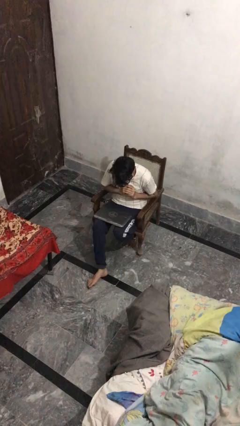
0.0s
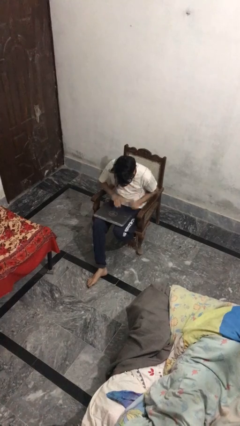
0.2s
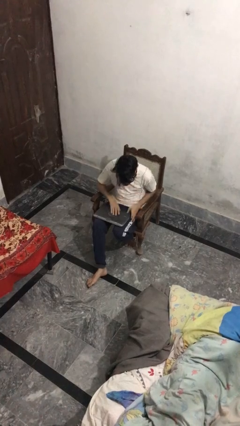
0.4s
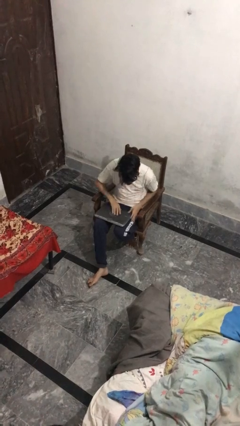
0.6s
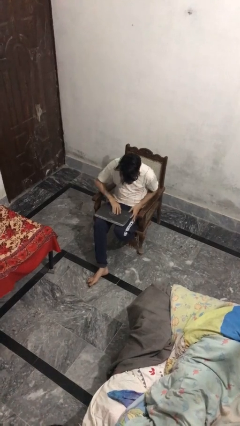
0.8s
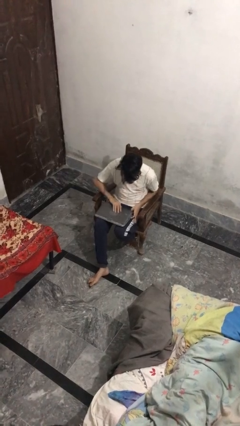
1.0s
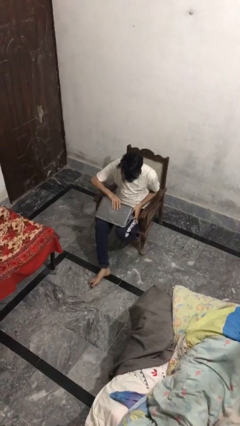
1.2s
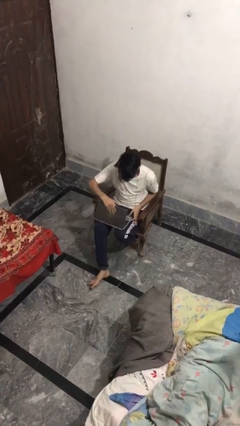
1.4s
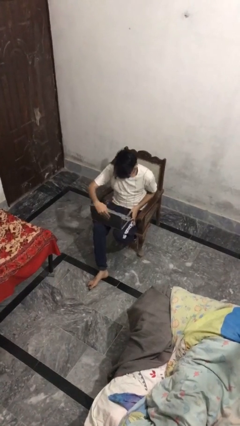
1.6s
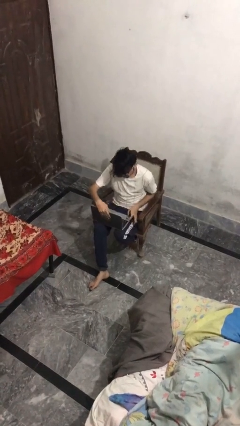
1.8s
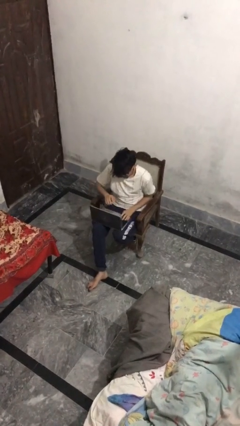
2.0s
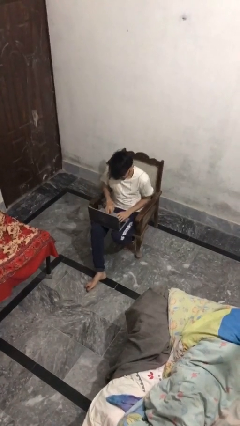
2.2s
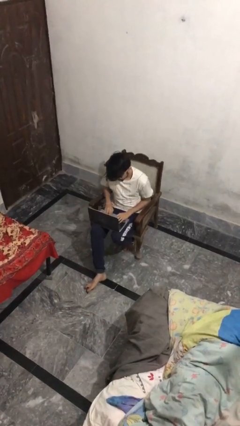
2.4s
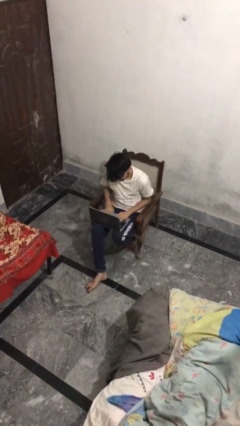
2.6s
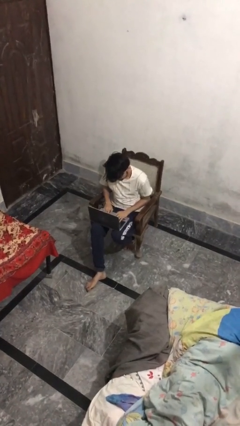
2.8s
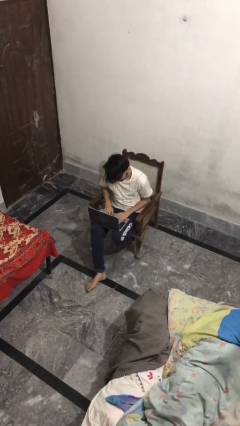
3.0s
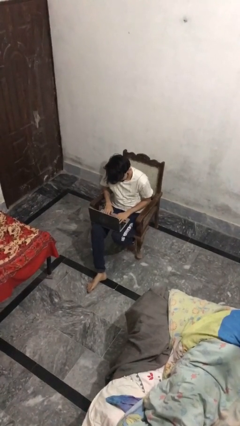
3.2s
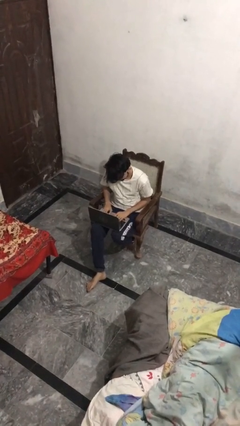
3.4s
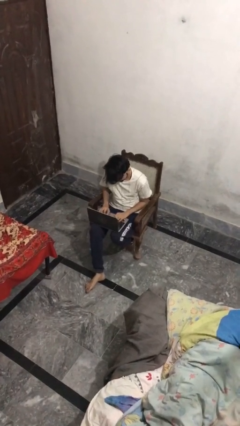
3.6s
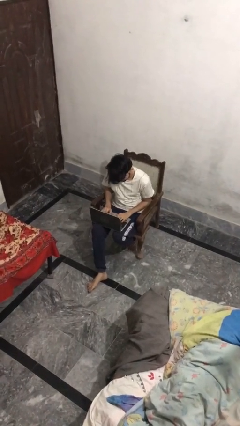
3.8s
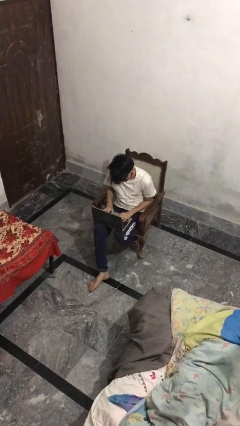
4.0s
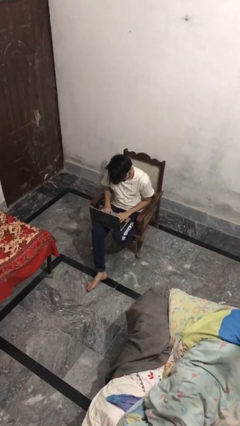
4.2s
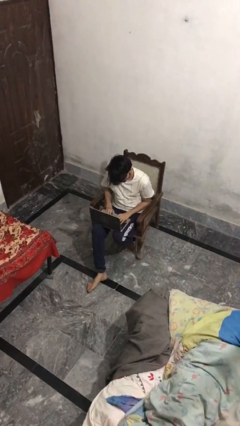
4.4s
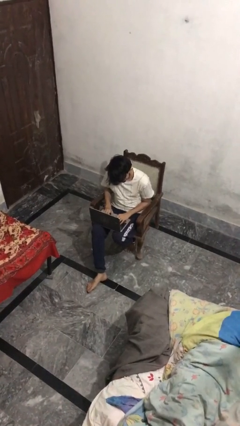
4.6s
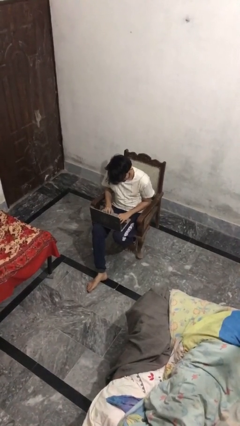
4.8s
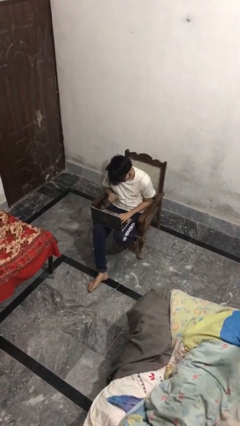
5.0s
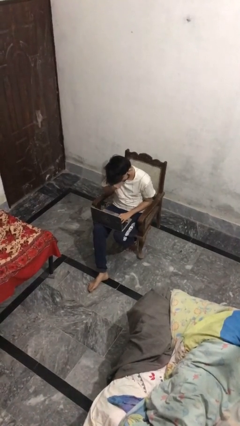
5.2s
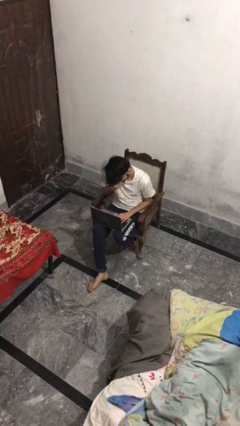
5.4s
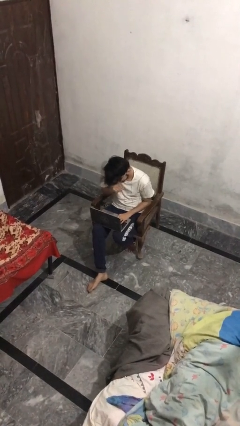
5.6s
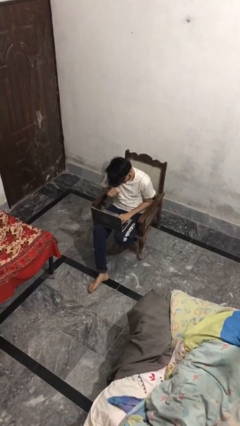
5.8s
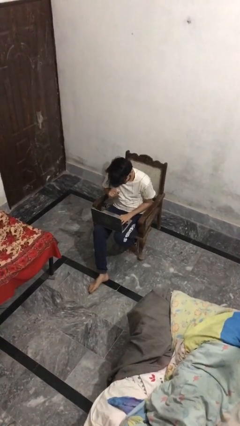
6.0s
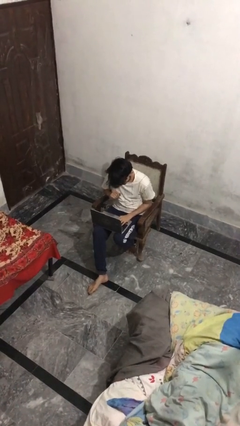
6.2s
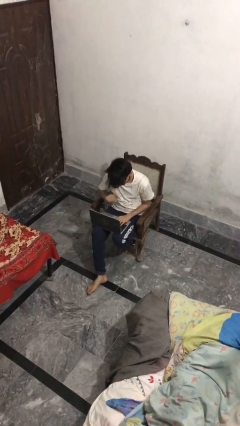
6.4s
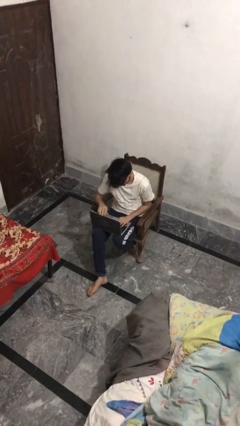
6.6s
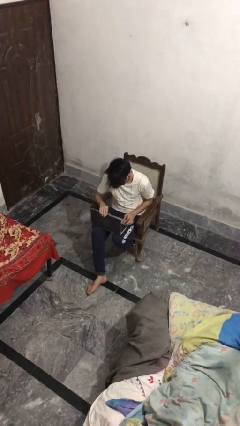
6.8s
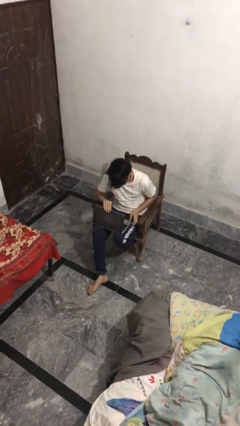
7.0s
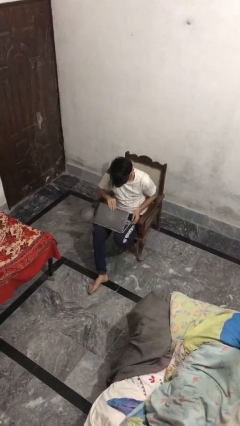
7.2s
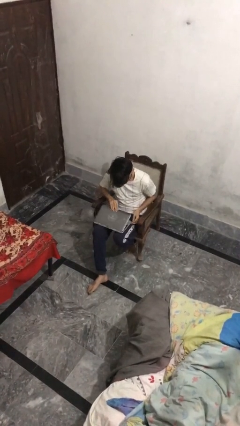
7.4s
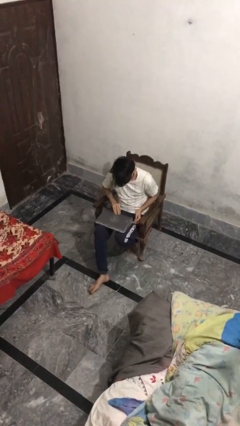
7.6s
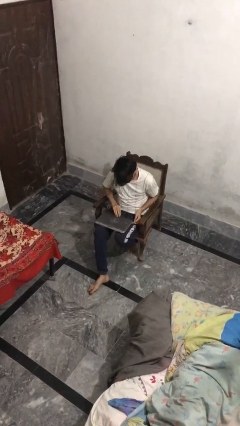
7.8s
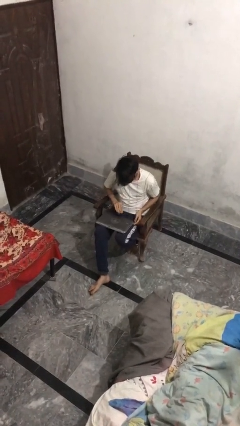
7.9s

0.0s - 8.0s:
person interacts with laptop

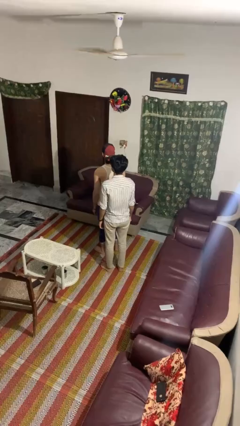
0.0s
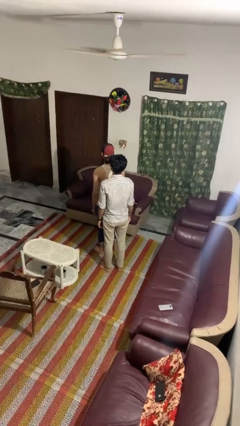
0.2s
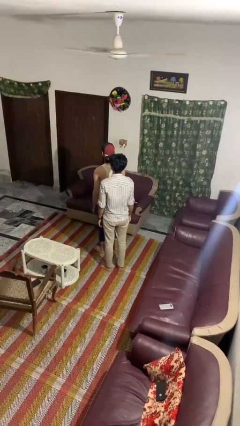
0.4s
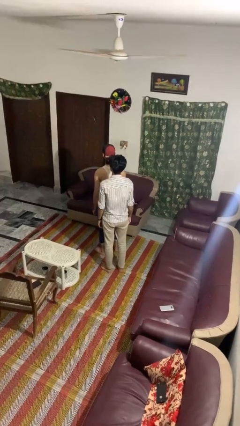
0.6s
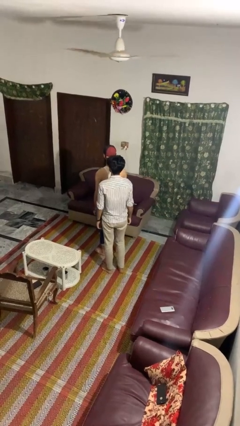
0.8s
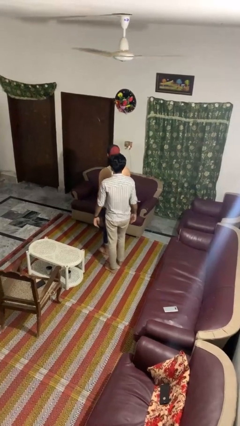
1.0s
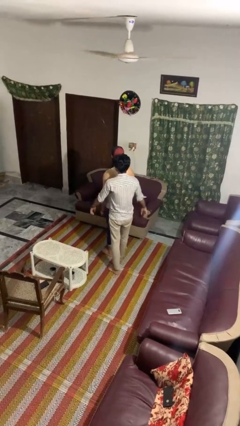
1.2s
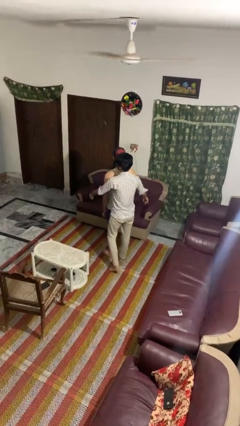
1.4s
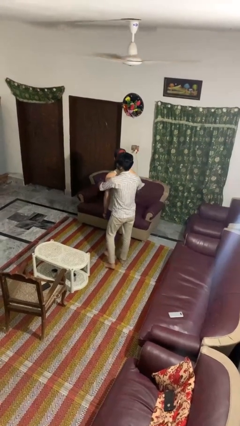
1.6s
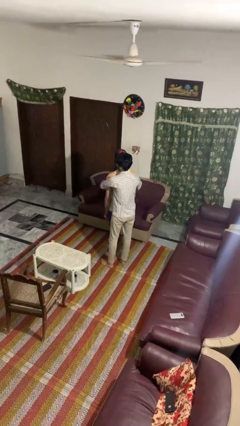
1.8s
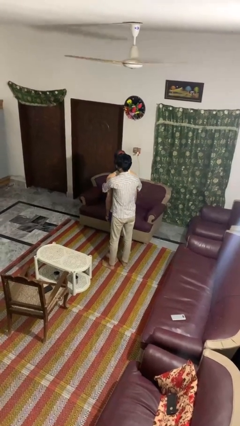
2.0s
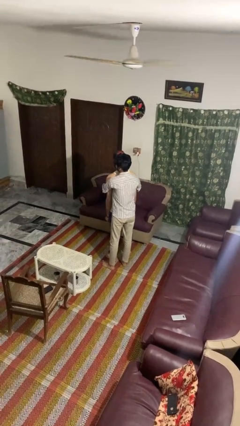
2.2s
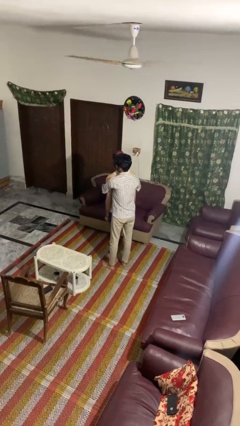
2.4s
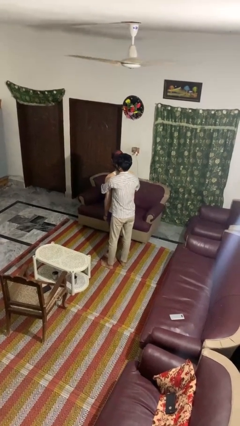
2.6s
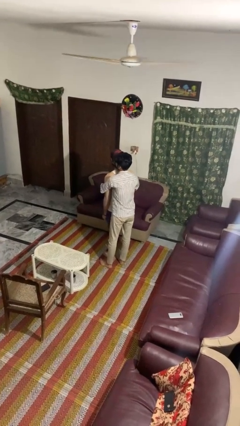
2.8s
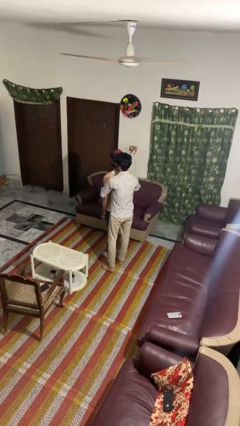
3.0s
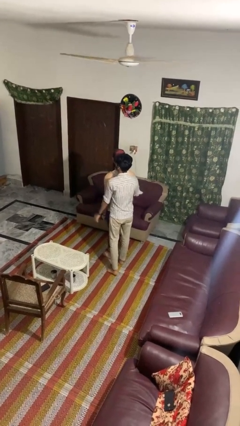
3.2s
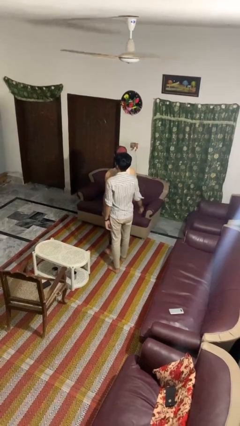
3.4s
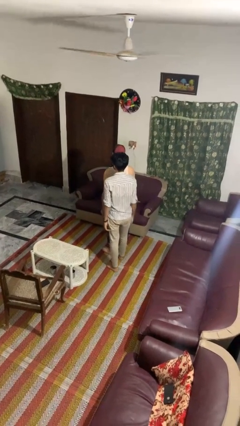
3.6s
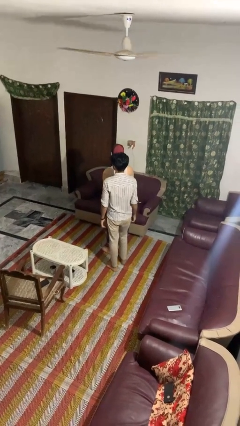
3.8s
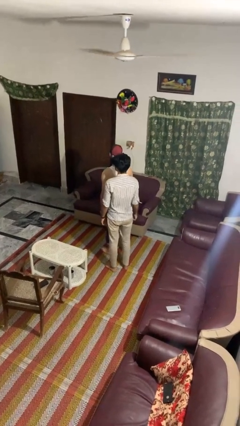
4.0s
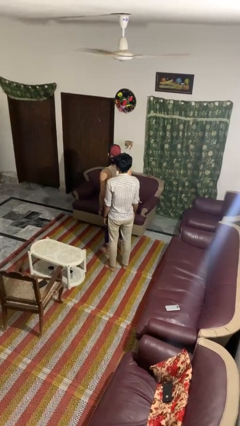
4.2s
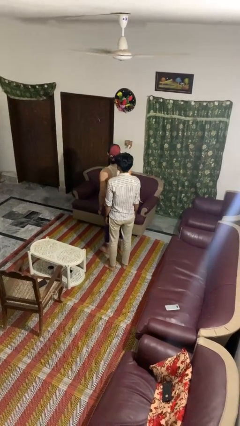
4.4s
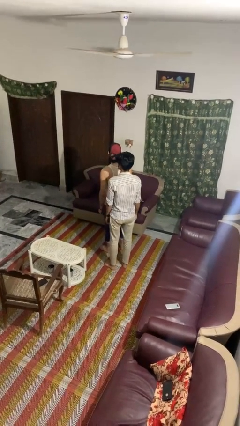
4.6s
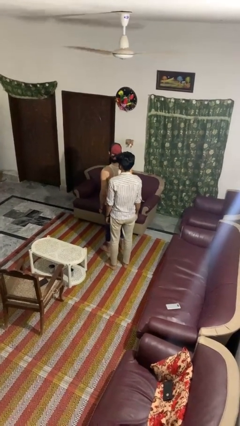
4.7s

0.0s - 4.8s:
person hugs person from behind

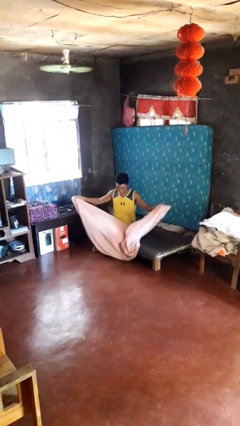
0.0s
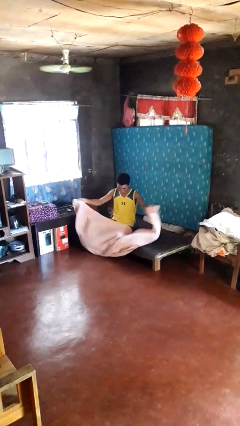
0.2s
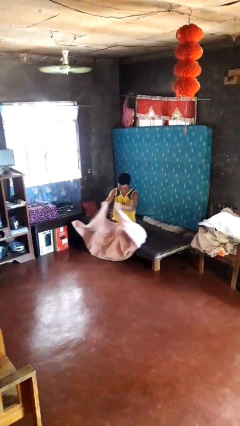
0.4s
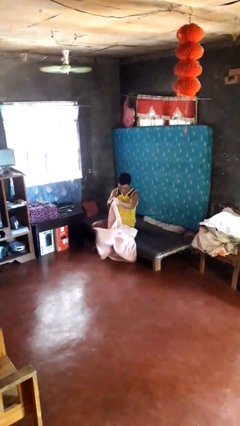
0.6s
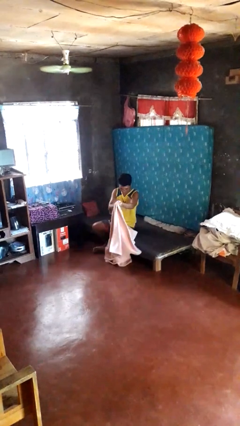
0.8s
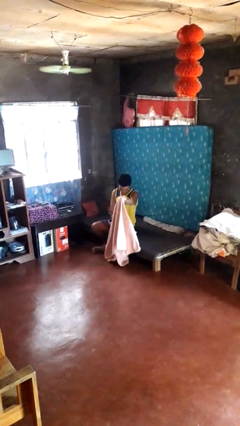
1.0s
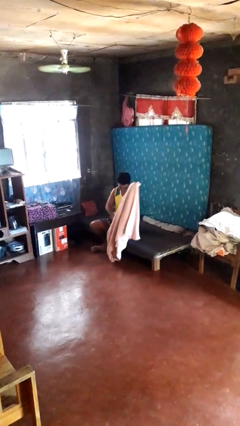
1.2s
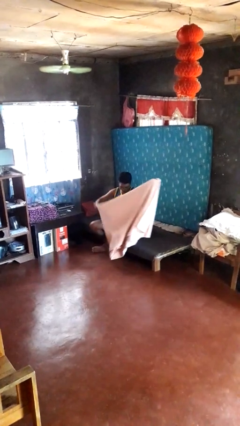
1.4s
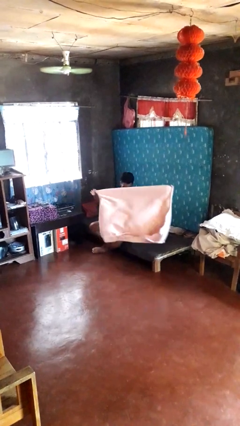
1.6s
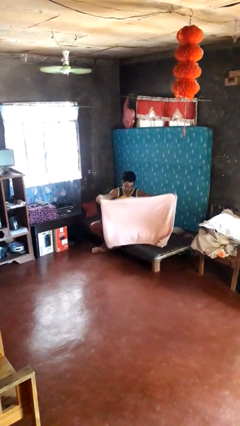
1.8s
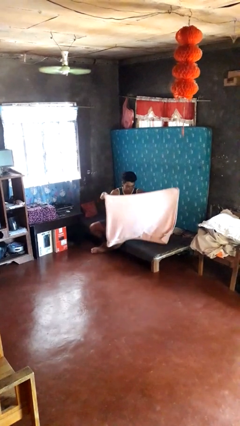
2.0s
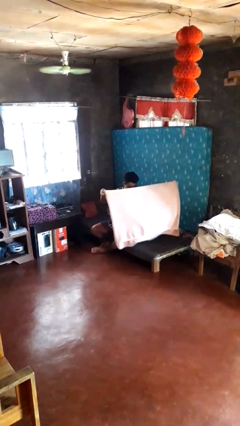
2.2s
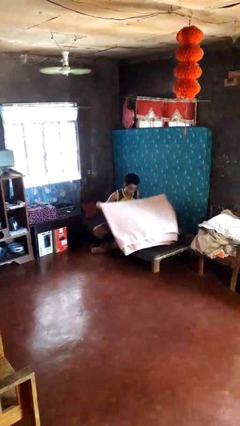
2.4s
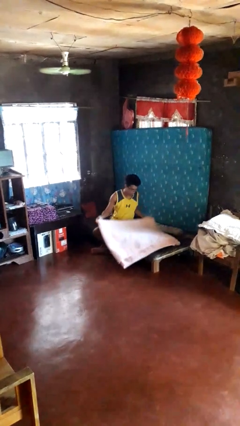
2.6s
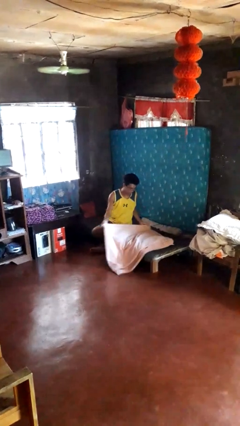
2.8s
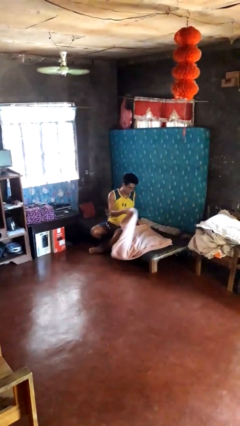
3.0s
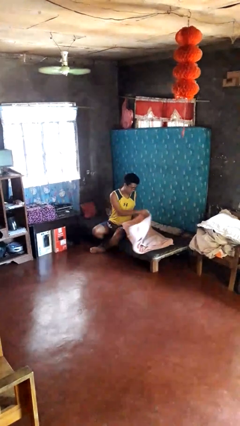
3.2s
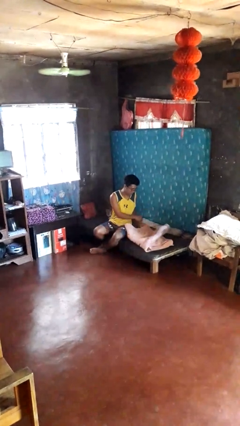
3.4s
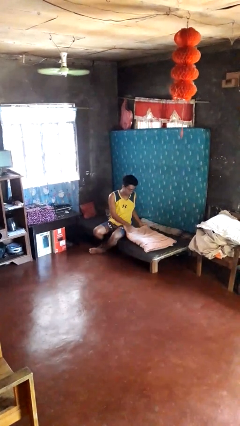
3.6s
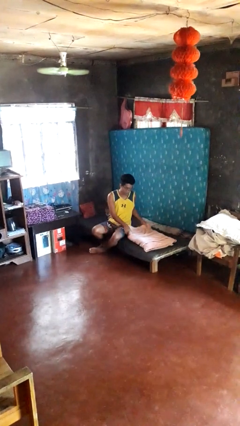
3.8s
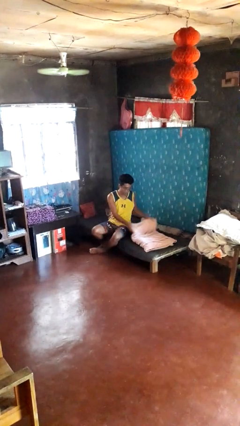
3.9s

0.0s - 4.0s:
person folds blanket

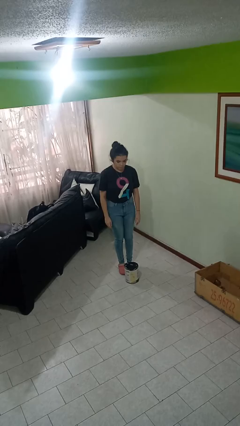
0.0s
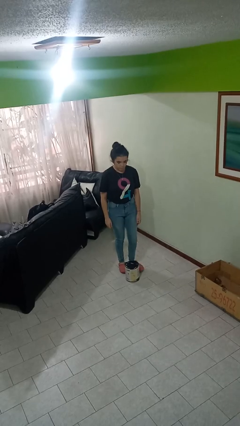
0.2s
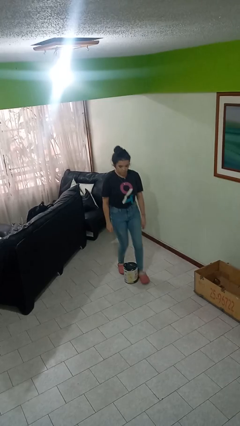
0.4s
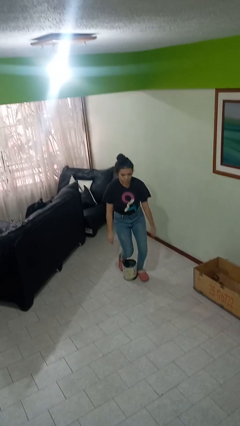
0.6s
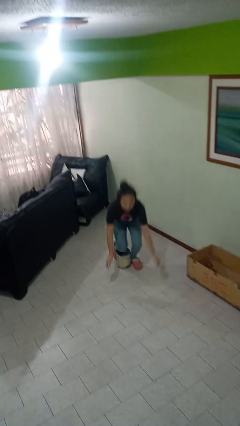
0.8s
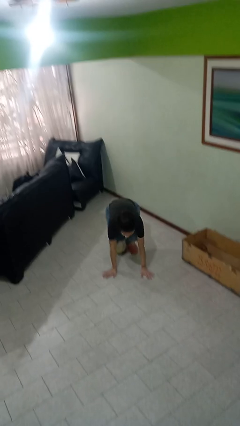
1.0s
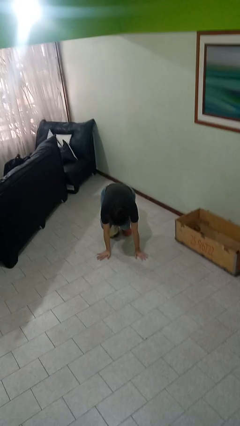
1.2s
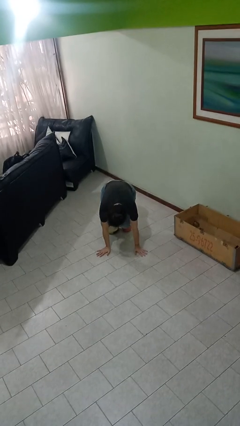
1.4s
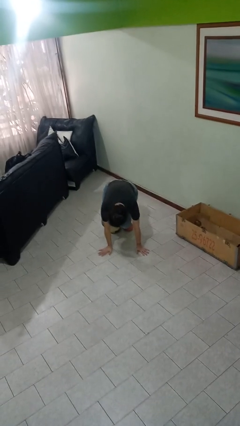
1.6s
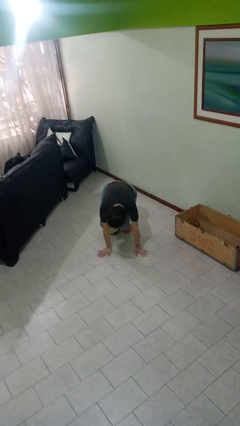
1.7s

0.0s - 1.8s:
person trips on object on floor
